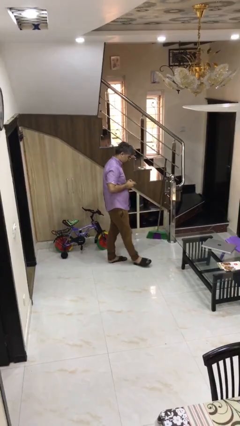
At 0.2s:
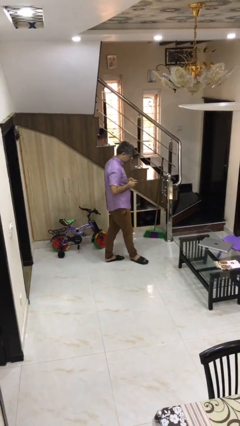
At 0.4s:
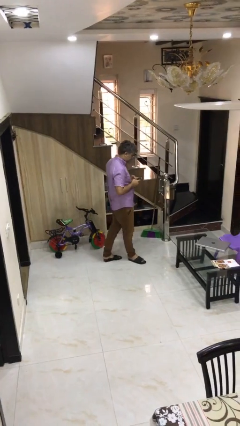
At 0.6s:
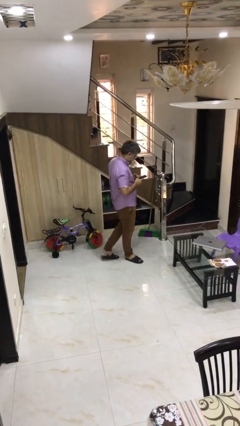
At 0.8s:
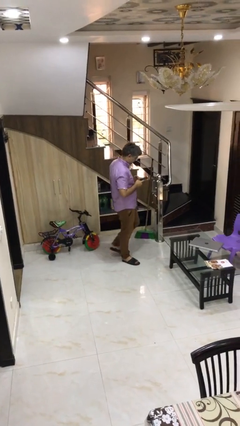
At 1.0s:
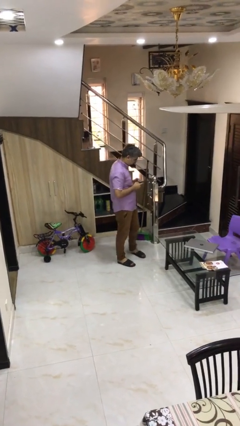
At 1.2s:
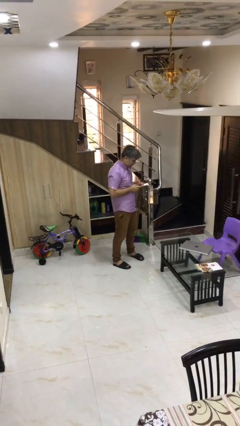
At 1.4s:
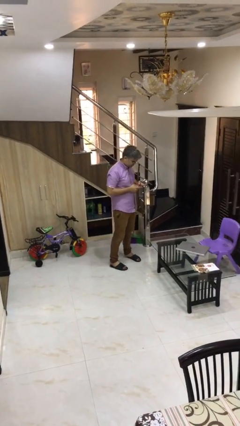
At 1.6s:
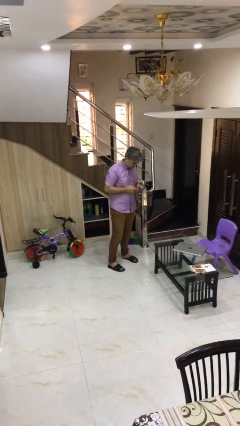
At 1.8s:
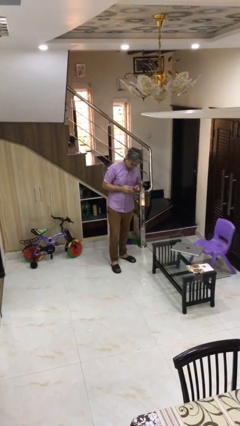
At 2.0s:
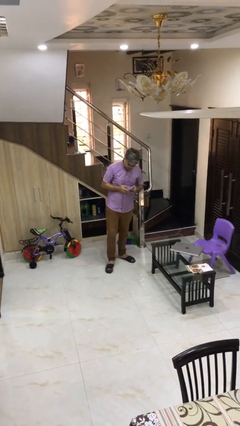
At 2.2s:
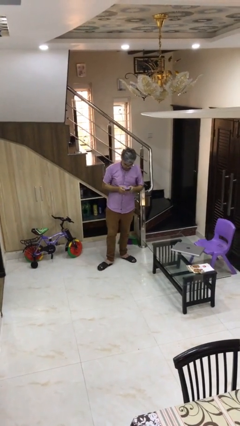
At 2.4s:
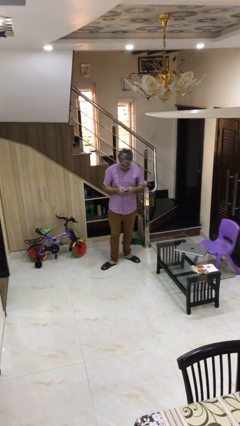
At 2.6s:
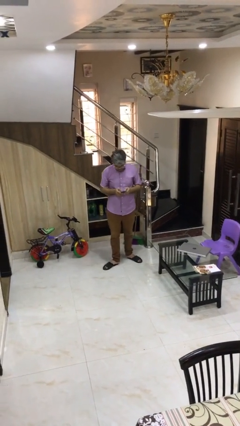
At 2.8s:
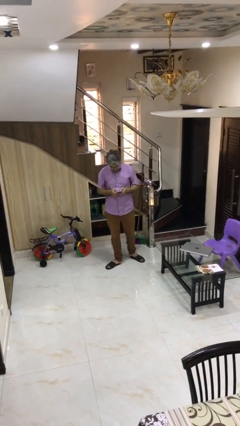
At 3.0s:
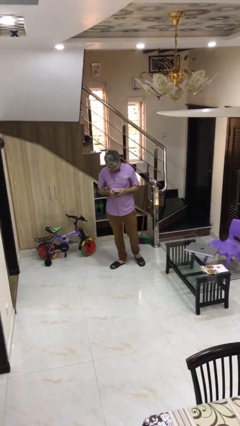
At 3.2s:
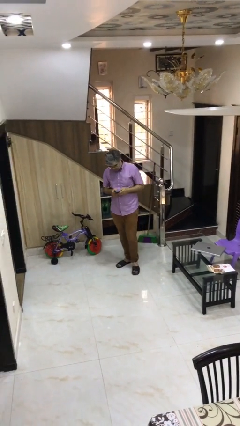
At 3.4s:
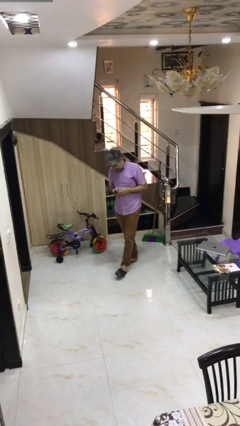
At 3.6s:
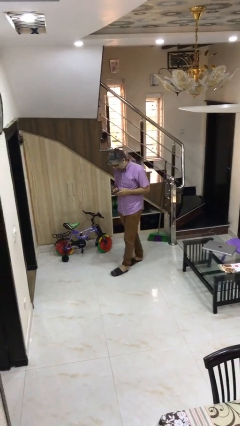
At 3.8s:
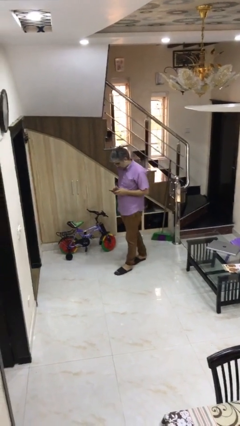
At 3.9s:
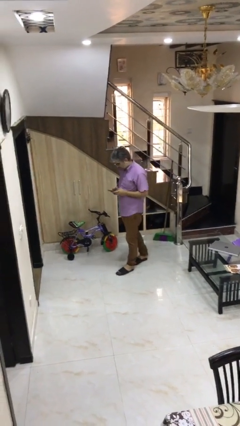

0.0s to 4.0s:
person texts on phone

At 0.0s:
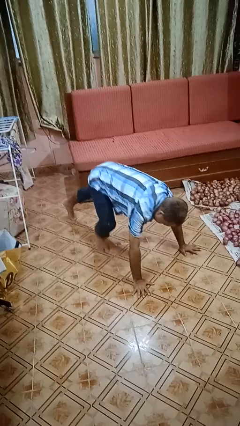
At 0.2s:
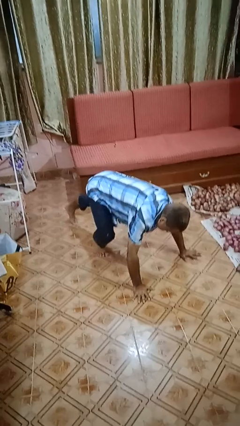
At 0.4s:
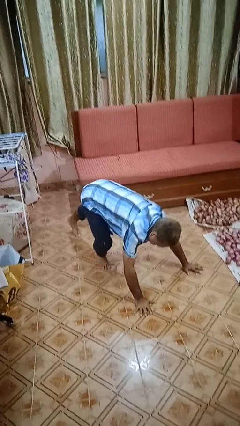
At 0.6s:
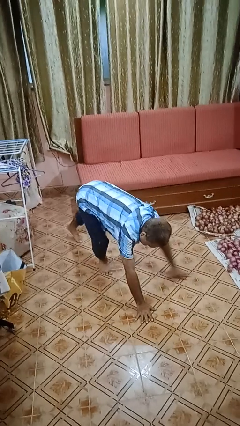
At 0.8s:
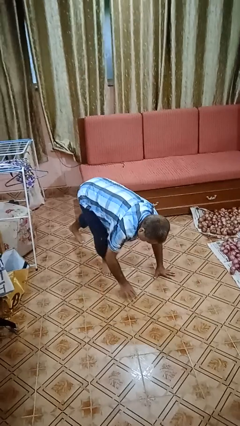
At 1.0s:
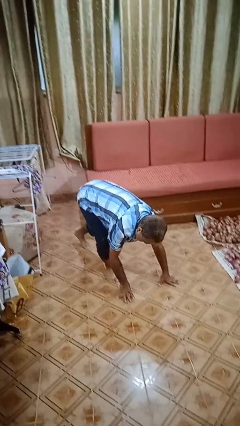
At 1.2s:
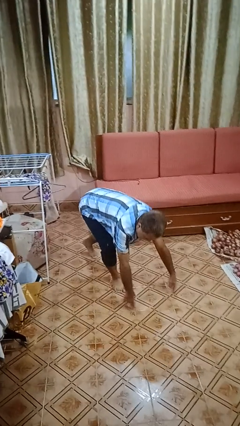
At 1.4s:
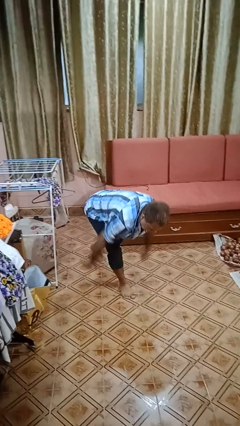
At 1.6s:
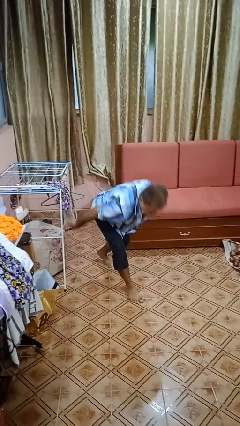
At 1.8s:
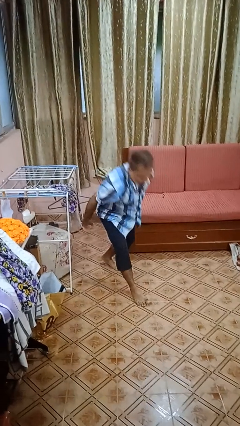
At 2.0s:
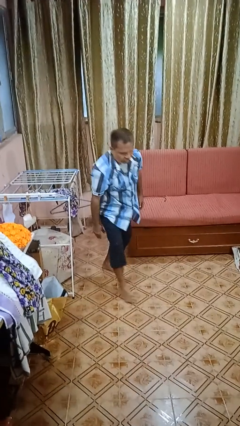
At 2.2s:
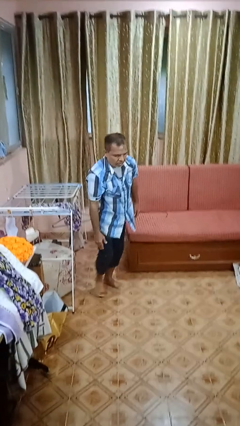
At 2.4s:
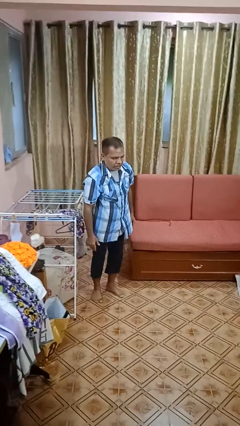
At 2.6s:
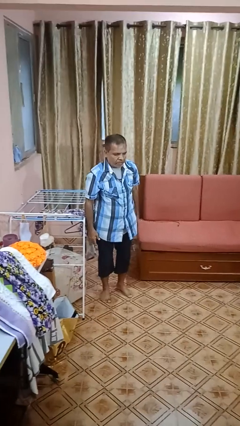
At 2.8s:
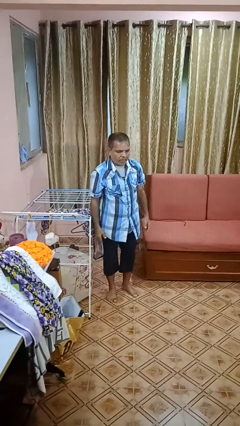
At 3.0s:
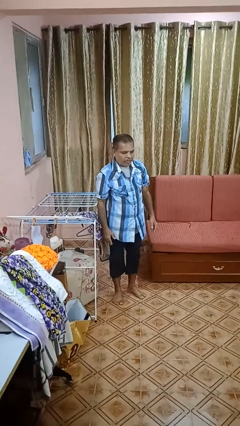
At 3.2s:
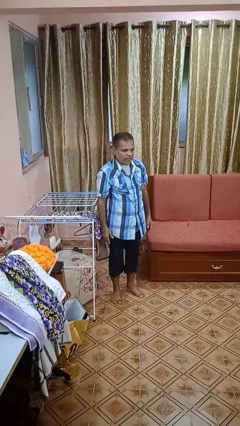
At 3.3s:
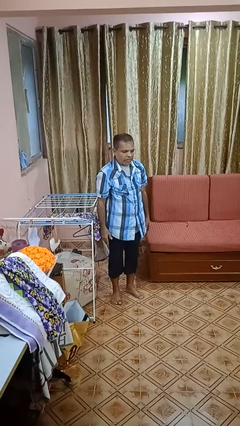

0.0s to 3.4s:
person stands up from floor

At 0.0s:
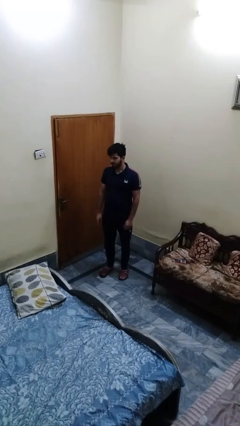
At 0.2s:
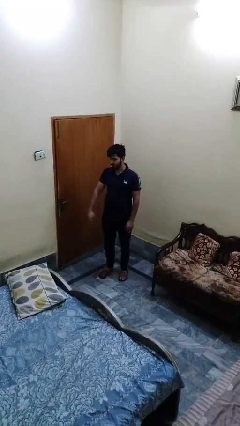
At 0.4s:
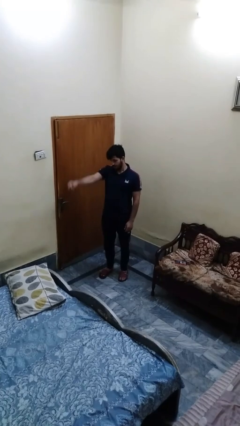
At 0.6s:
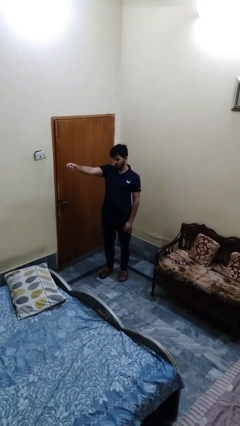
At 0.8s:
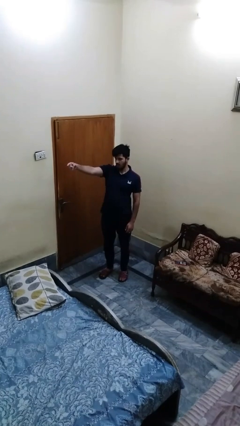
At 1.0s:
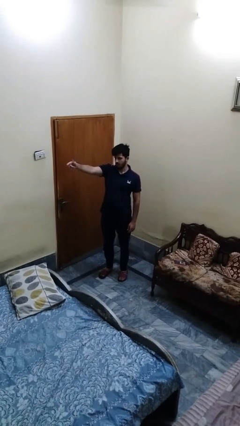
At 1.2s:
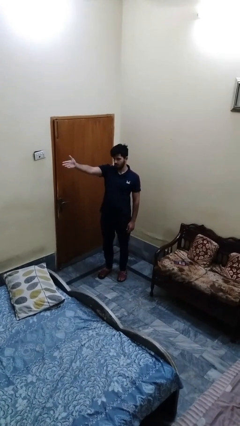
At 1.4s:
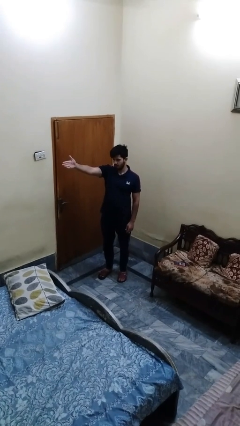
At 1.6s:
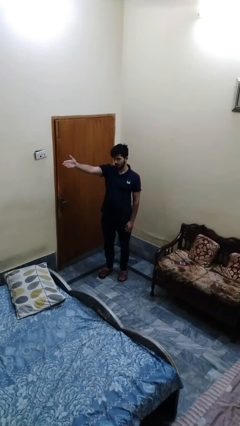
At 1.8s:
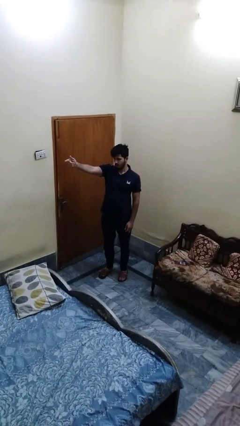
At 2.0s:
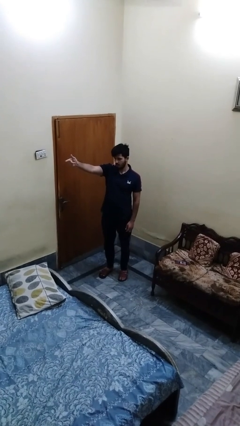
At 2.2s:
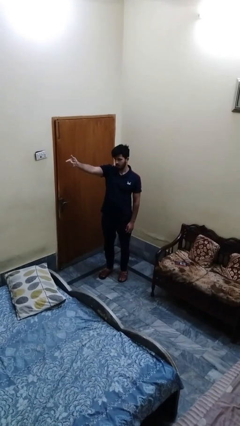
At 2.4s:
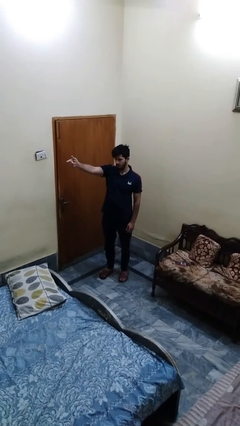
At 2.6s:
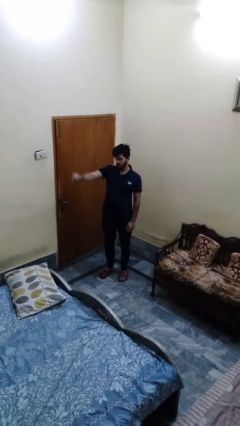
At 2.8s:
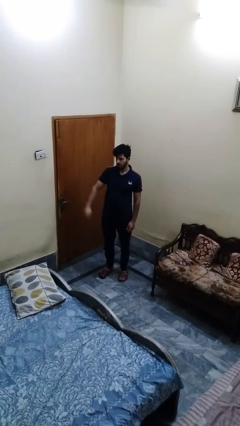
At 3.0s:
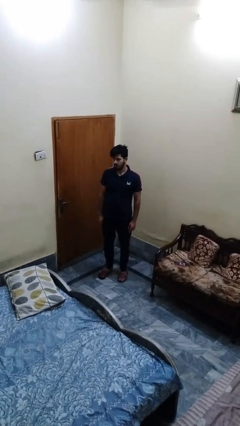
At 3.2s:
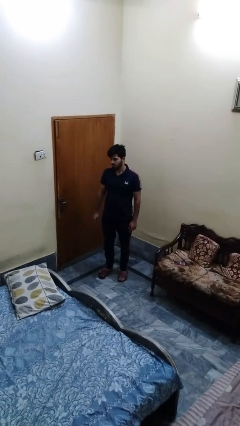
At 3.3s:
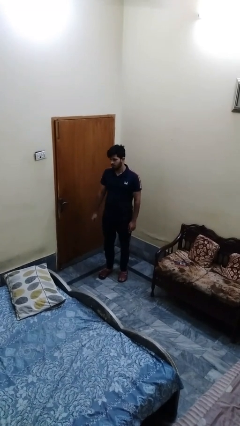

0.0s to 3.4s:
person points at person

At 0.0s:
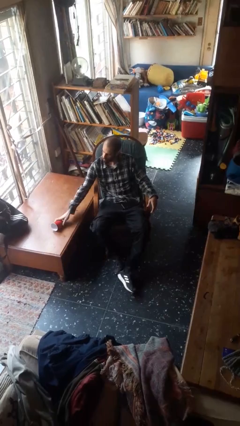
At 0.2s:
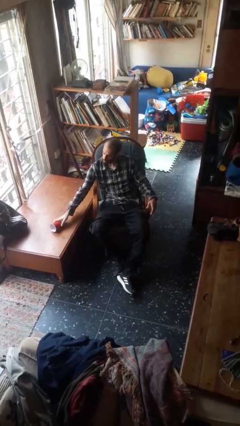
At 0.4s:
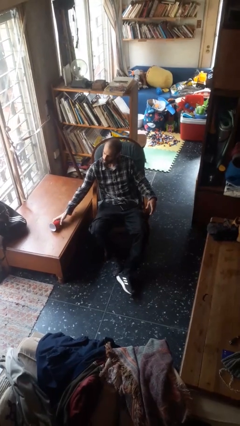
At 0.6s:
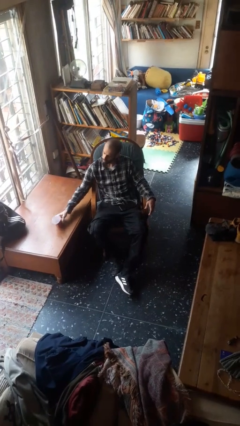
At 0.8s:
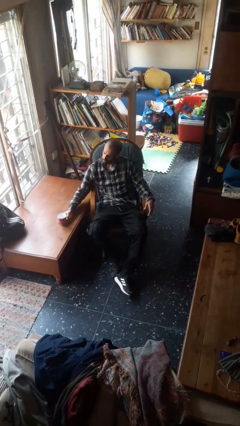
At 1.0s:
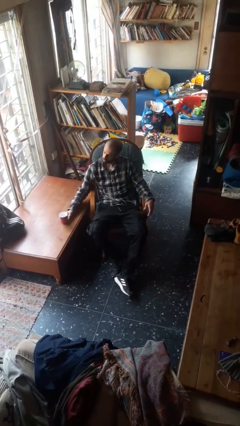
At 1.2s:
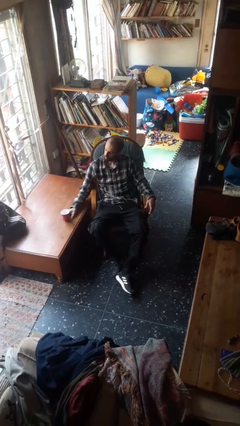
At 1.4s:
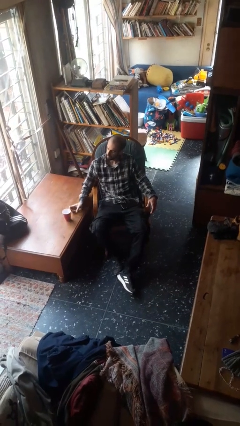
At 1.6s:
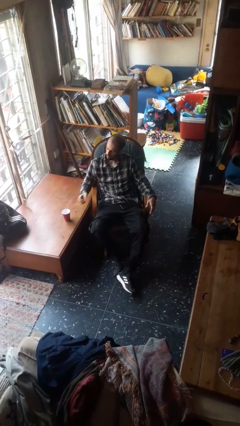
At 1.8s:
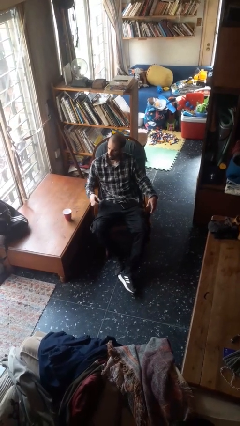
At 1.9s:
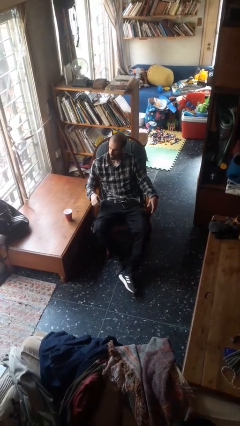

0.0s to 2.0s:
person sets upright glass

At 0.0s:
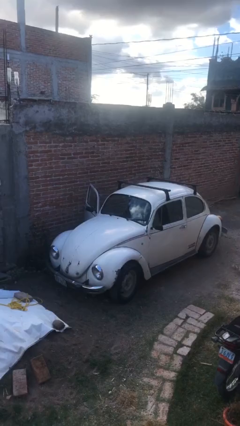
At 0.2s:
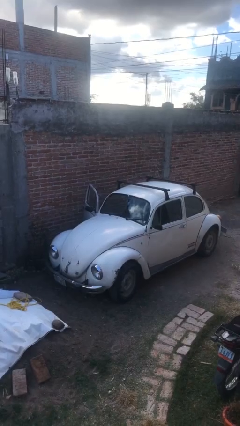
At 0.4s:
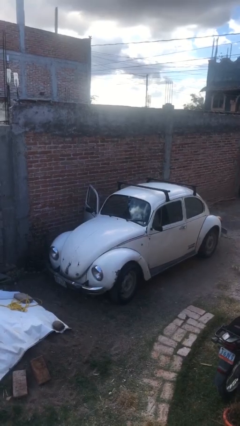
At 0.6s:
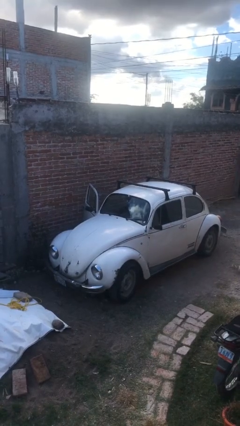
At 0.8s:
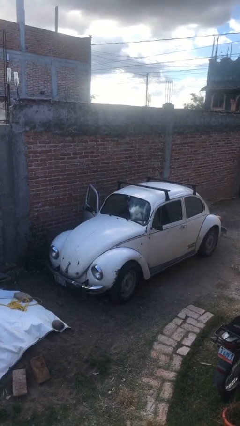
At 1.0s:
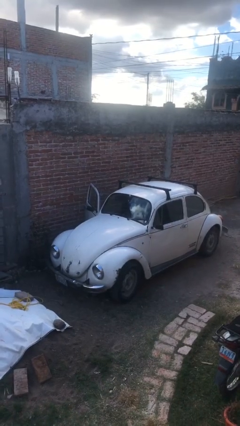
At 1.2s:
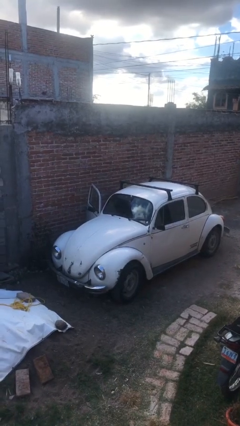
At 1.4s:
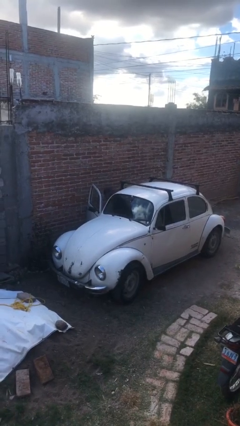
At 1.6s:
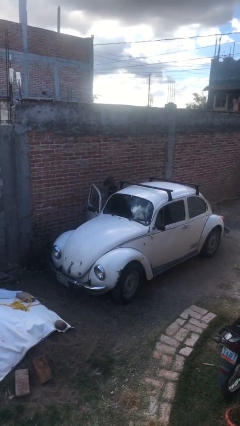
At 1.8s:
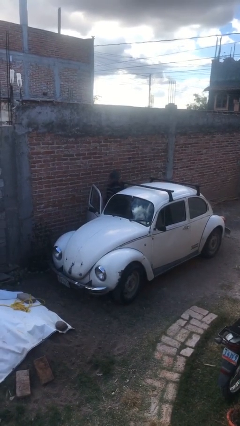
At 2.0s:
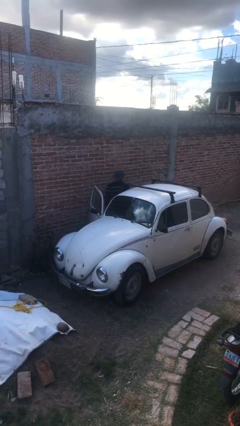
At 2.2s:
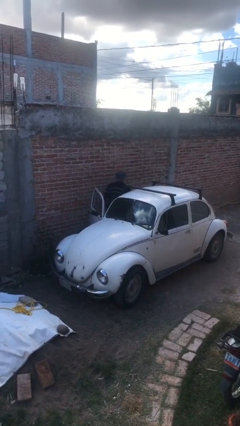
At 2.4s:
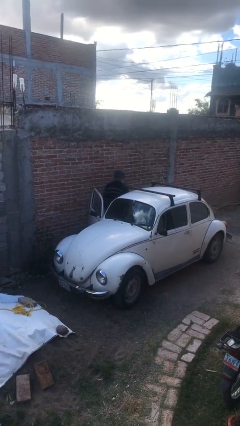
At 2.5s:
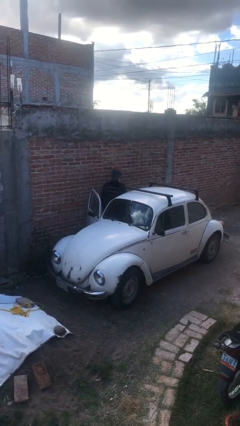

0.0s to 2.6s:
person exits car

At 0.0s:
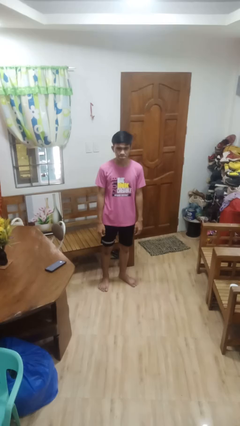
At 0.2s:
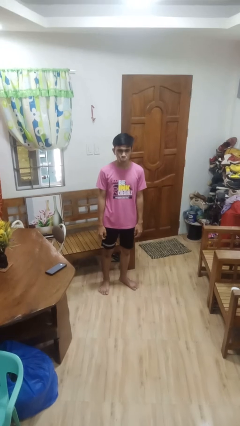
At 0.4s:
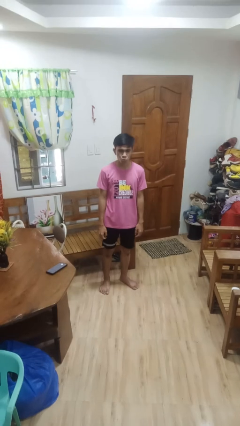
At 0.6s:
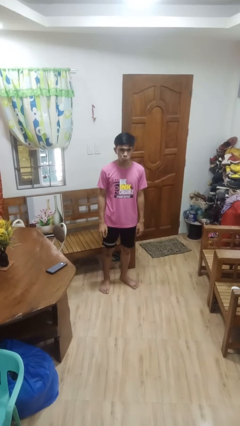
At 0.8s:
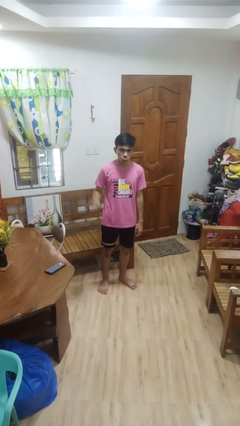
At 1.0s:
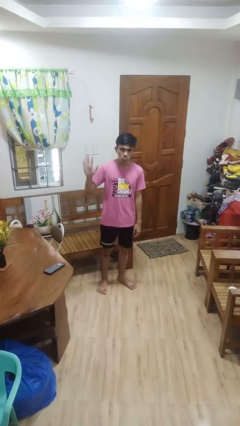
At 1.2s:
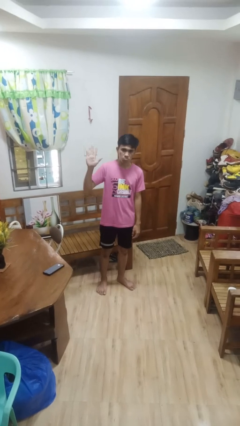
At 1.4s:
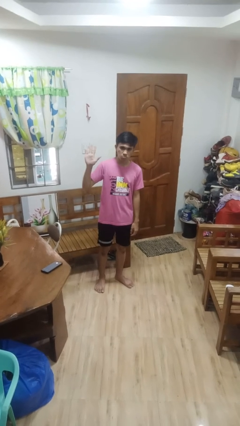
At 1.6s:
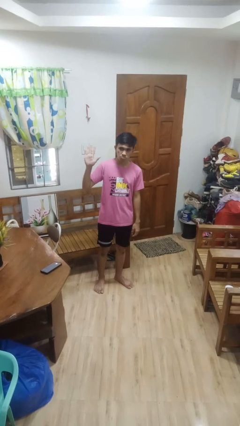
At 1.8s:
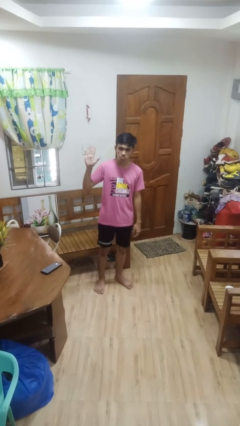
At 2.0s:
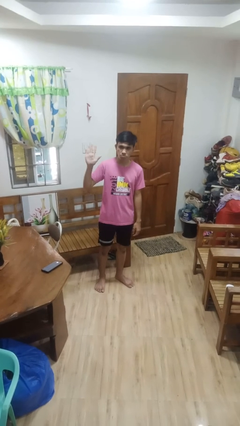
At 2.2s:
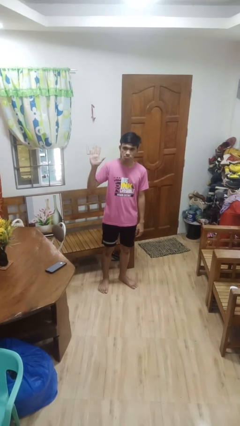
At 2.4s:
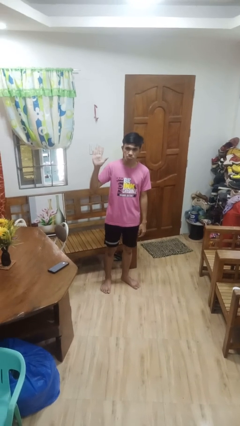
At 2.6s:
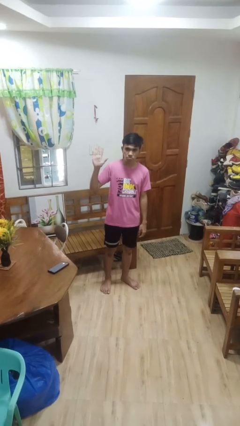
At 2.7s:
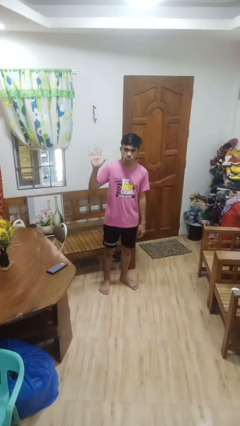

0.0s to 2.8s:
person gestures number five
